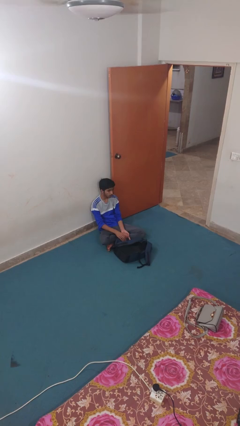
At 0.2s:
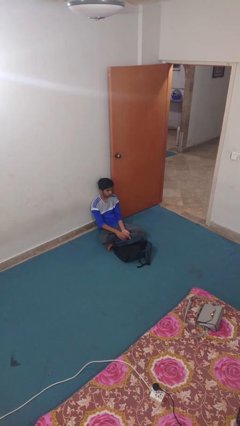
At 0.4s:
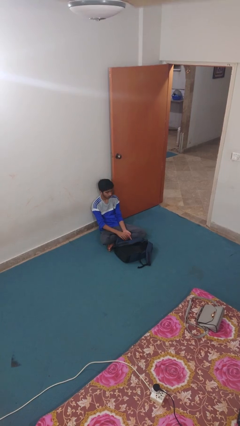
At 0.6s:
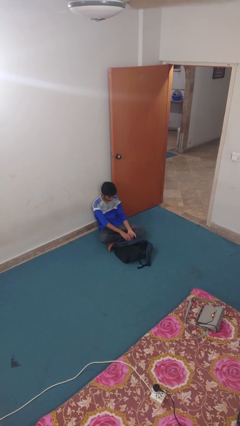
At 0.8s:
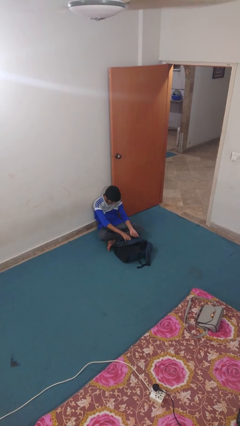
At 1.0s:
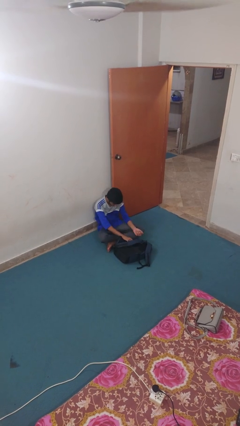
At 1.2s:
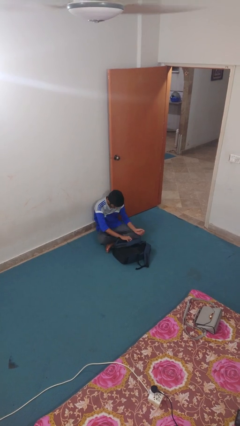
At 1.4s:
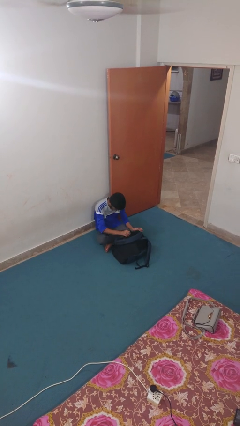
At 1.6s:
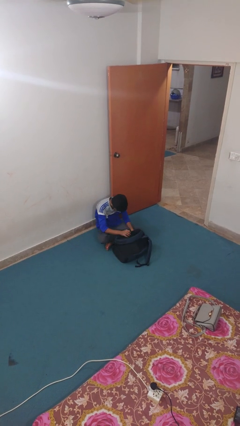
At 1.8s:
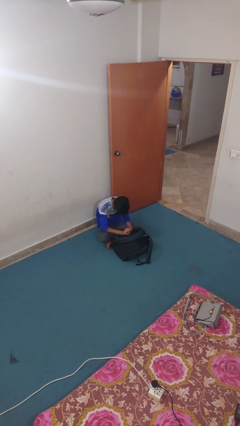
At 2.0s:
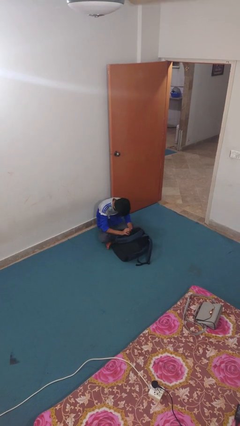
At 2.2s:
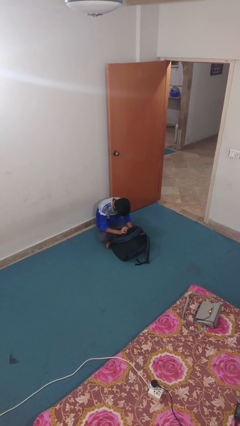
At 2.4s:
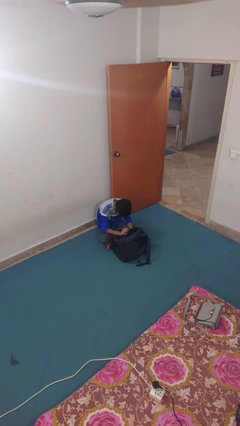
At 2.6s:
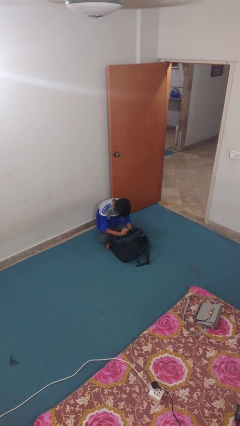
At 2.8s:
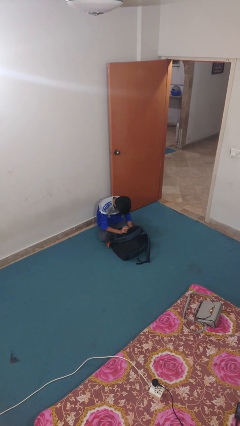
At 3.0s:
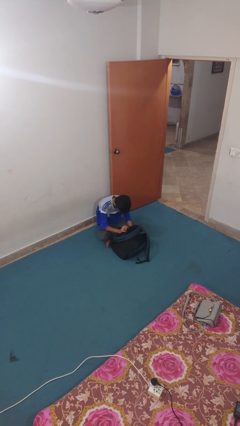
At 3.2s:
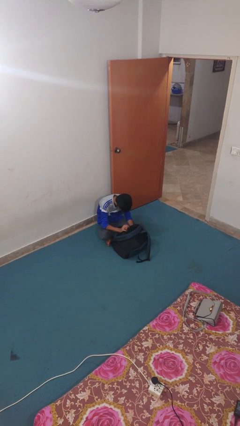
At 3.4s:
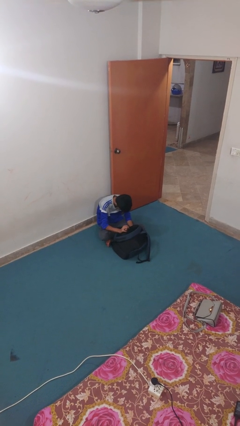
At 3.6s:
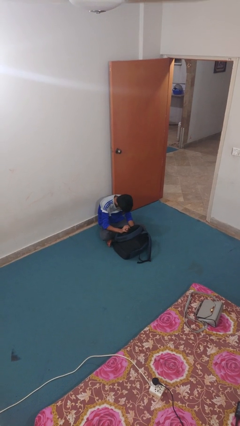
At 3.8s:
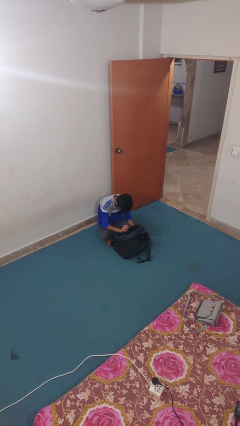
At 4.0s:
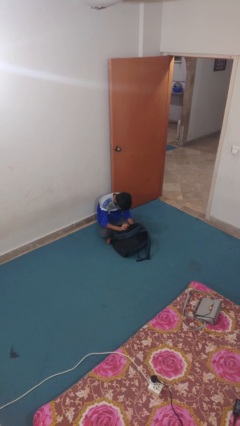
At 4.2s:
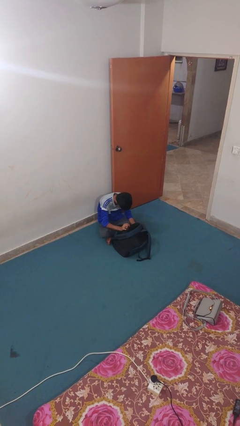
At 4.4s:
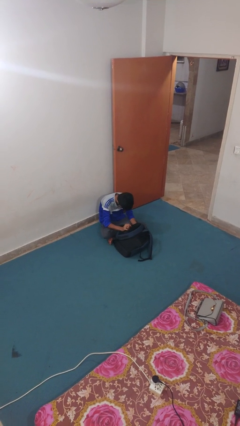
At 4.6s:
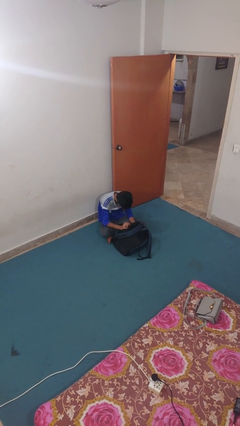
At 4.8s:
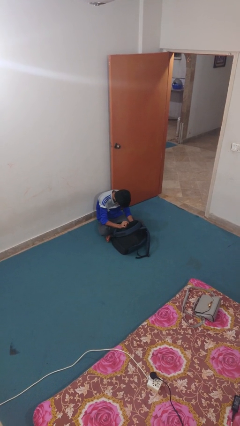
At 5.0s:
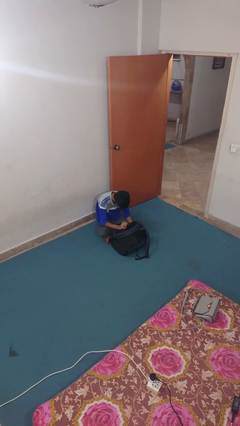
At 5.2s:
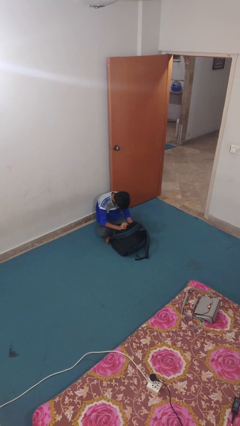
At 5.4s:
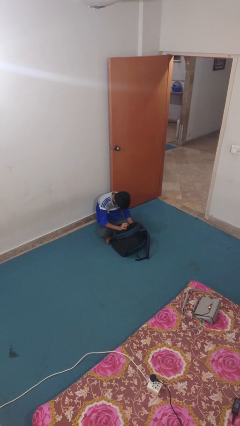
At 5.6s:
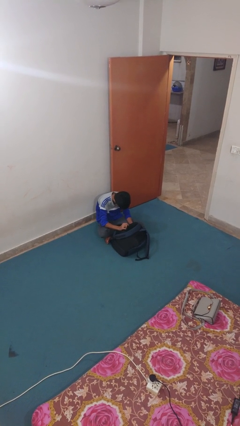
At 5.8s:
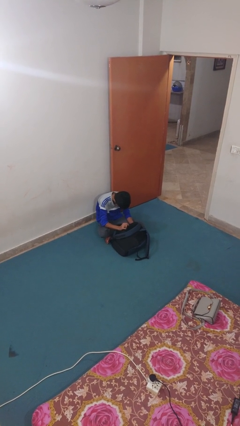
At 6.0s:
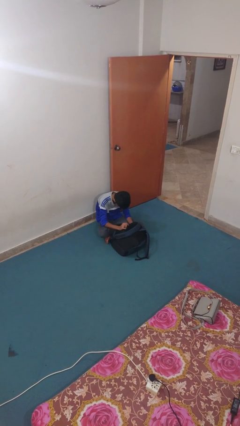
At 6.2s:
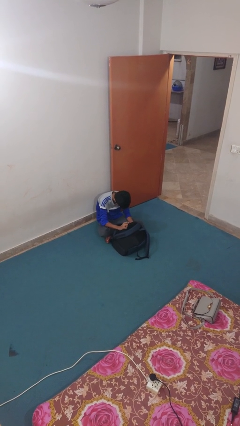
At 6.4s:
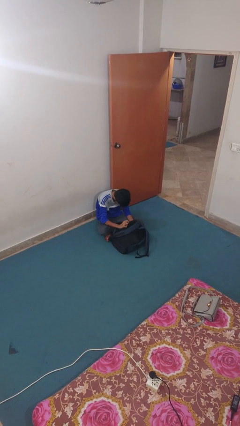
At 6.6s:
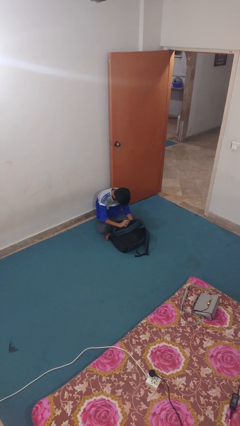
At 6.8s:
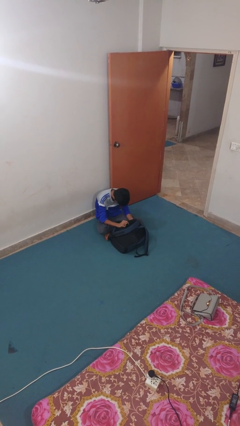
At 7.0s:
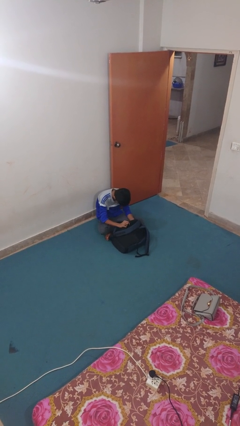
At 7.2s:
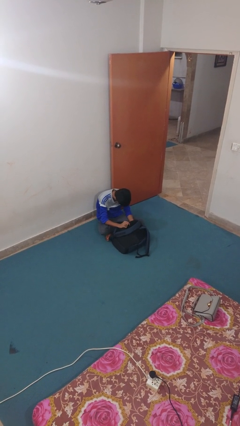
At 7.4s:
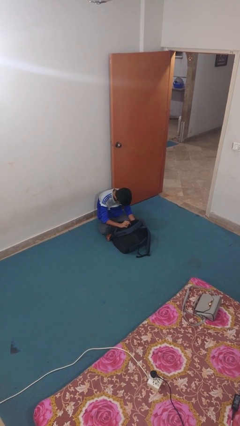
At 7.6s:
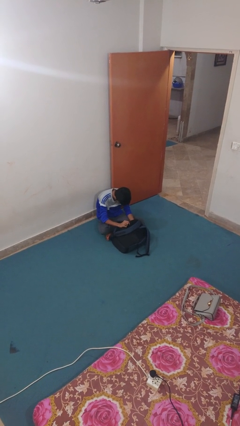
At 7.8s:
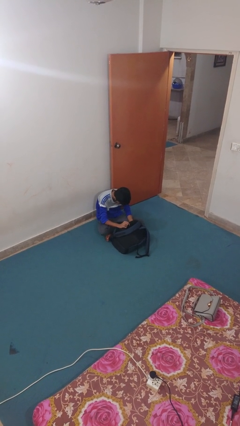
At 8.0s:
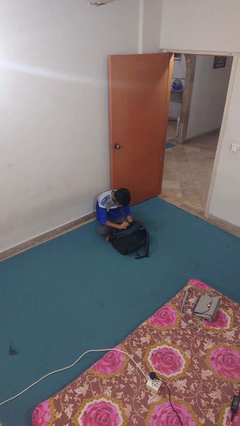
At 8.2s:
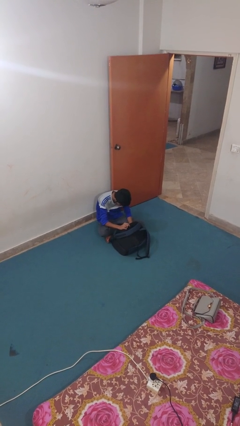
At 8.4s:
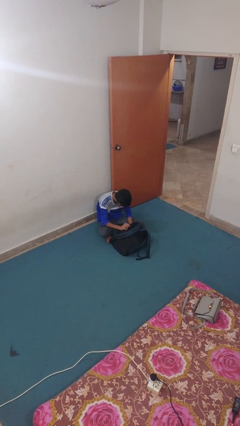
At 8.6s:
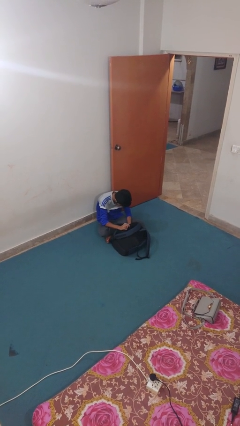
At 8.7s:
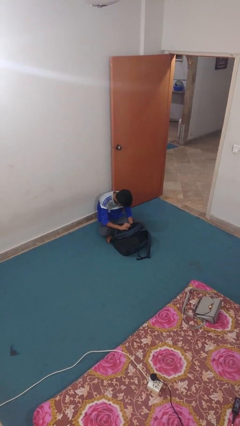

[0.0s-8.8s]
person searches in backpack

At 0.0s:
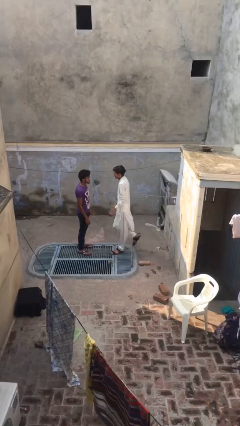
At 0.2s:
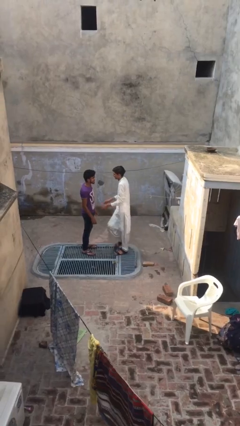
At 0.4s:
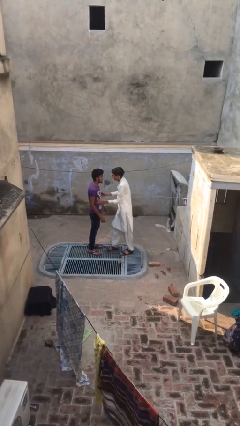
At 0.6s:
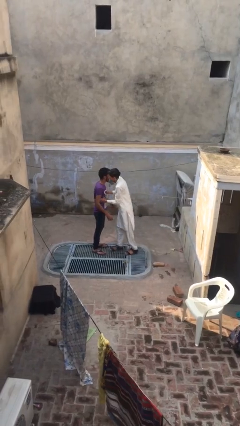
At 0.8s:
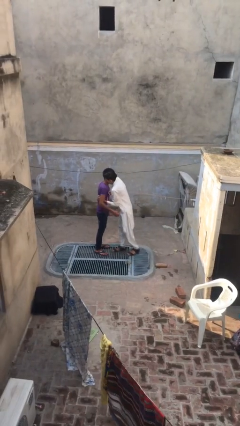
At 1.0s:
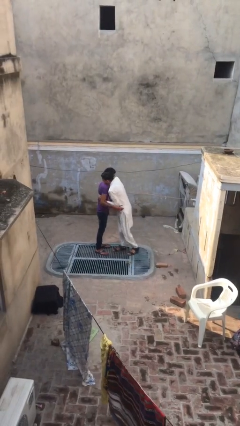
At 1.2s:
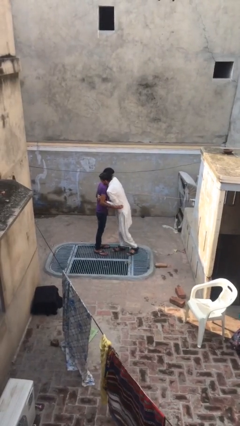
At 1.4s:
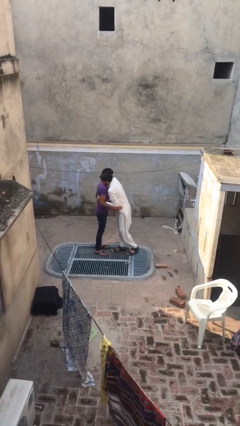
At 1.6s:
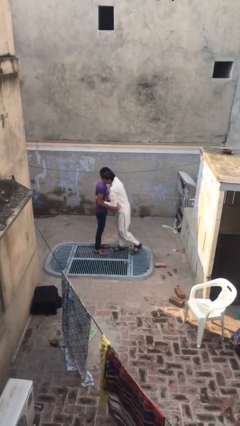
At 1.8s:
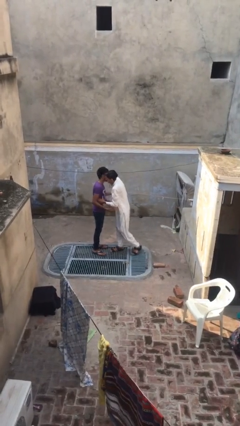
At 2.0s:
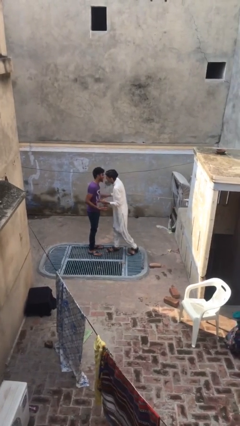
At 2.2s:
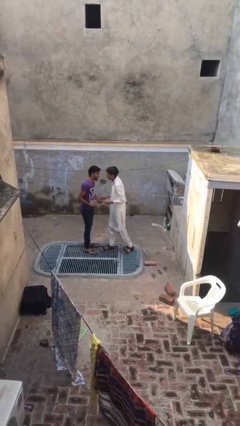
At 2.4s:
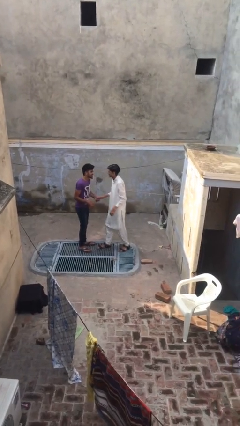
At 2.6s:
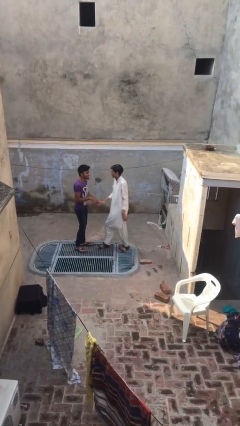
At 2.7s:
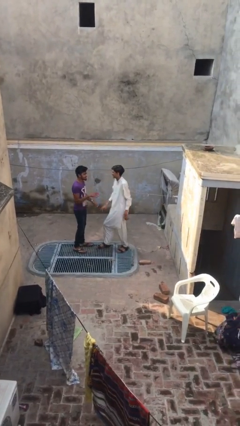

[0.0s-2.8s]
person embraces person

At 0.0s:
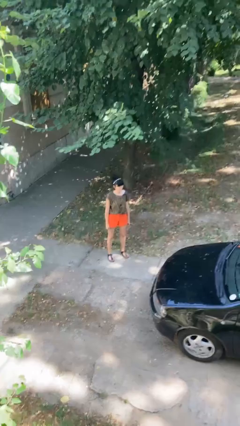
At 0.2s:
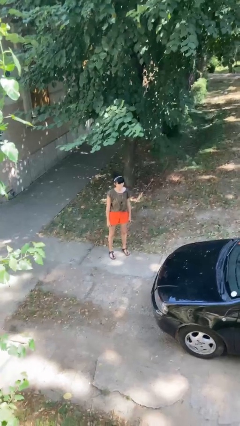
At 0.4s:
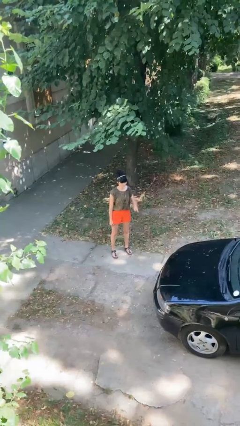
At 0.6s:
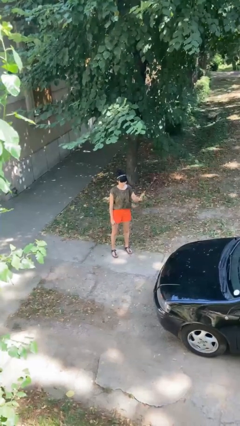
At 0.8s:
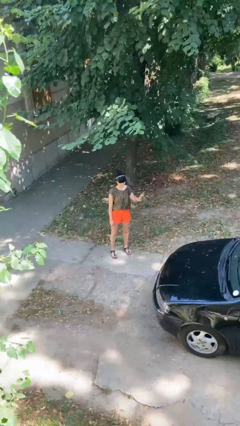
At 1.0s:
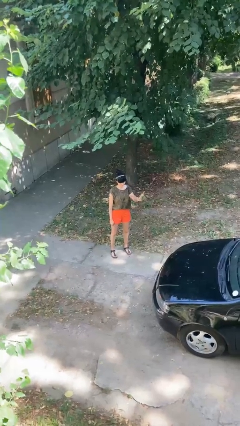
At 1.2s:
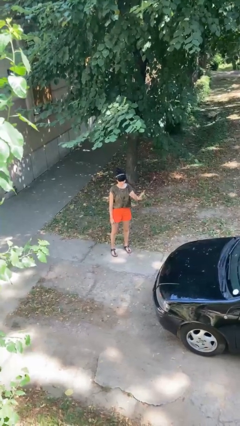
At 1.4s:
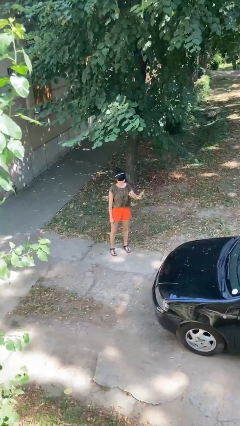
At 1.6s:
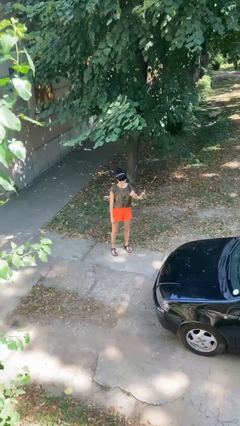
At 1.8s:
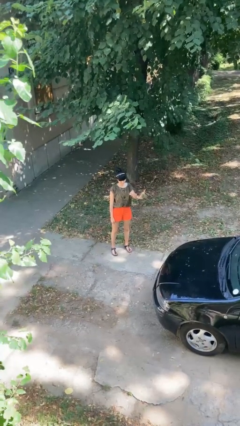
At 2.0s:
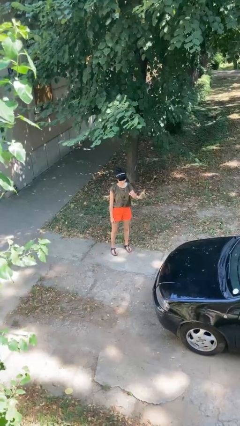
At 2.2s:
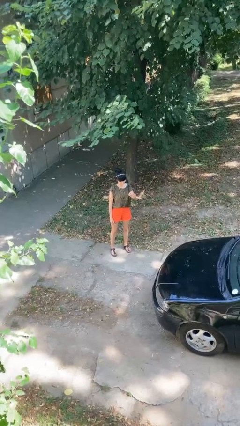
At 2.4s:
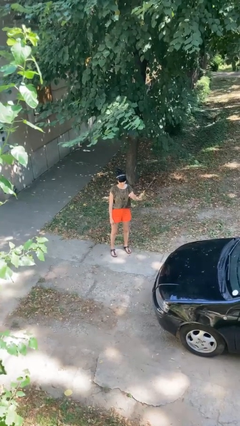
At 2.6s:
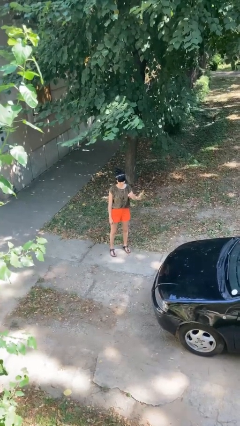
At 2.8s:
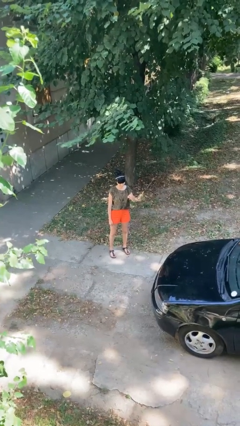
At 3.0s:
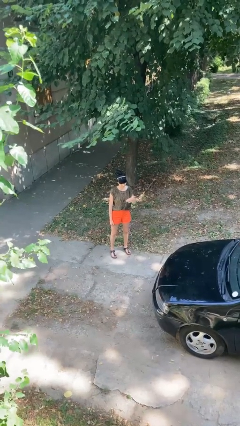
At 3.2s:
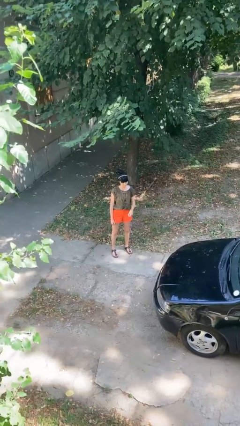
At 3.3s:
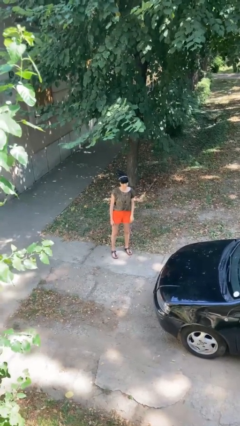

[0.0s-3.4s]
person points at person

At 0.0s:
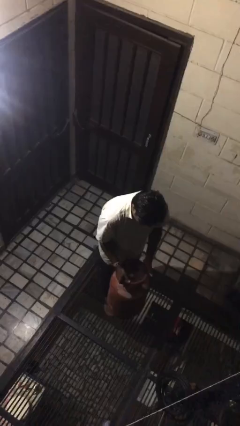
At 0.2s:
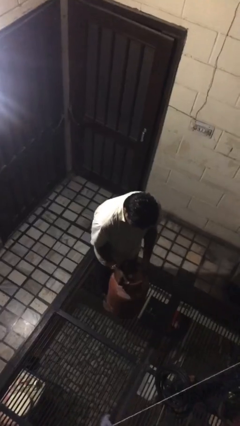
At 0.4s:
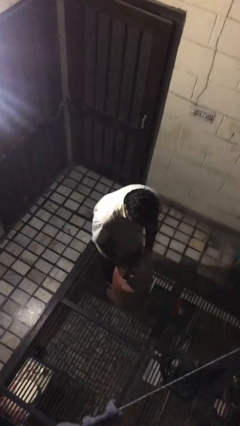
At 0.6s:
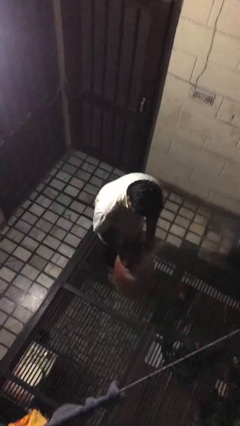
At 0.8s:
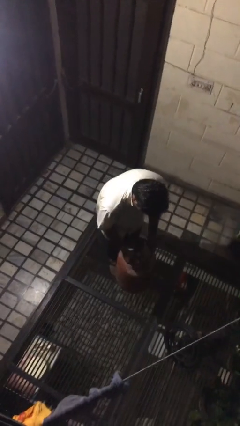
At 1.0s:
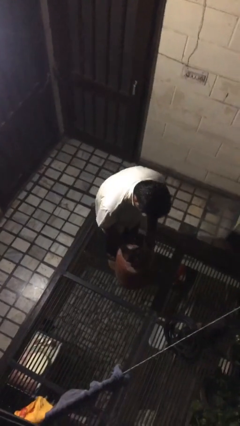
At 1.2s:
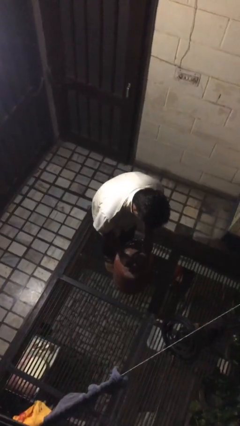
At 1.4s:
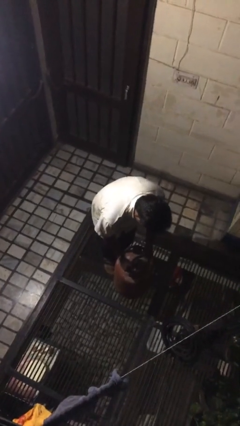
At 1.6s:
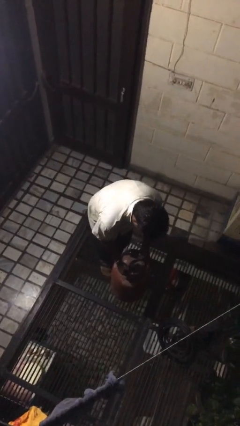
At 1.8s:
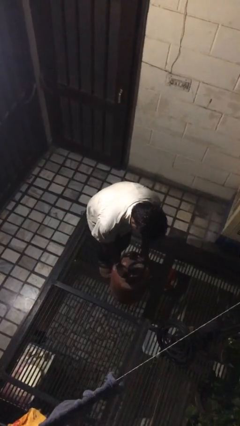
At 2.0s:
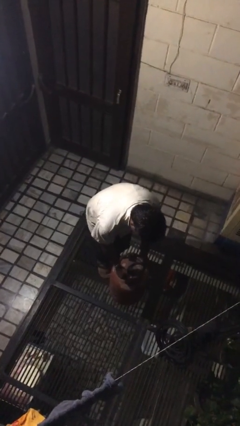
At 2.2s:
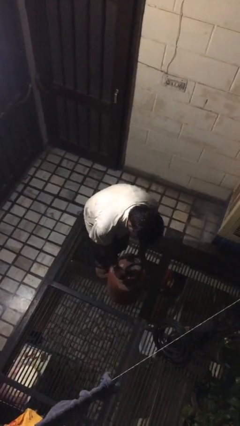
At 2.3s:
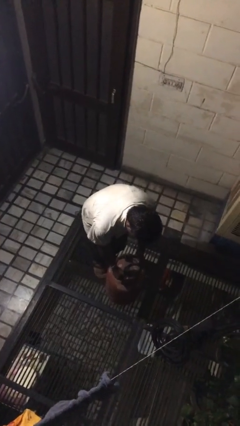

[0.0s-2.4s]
person puts down object on floor

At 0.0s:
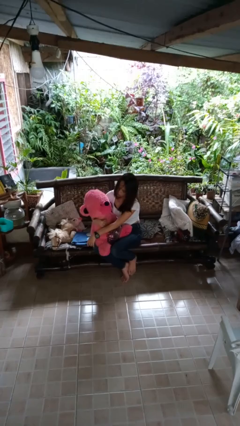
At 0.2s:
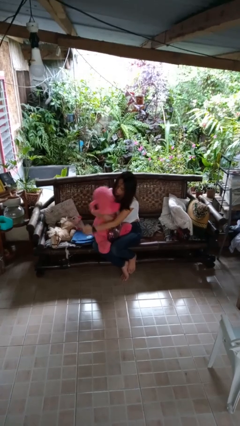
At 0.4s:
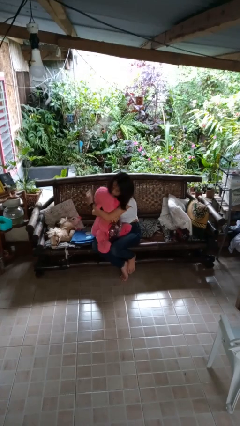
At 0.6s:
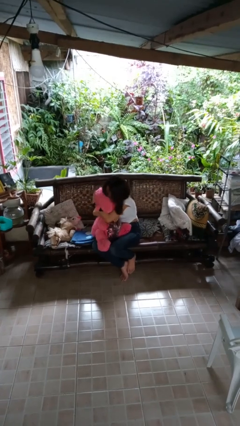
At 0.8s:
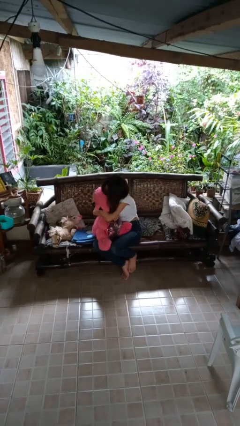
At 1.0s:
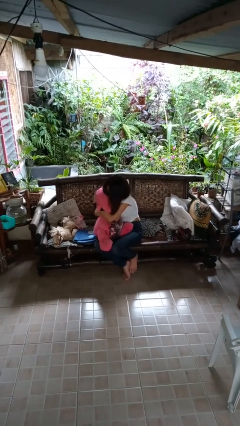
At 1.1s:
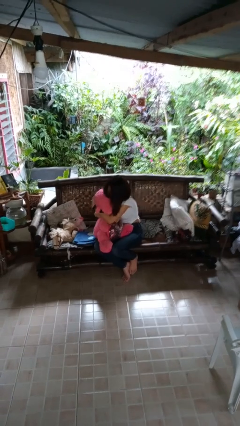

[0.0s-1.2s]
person hugs stuffed animal
